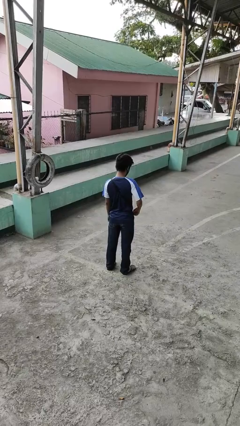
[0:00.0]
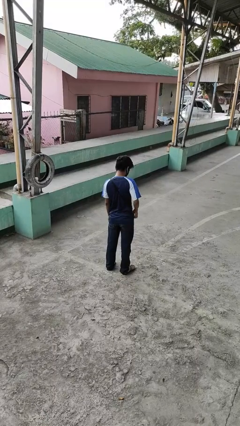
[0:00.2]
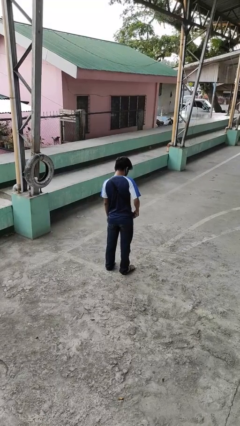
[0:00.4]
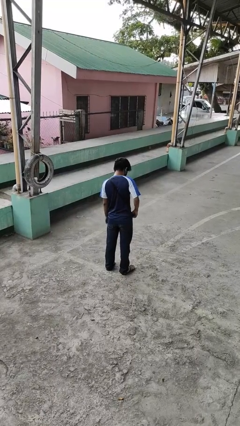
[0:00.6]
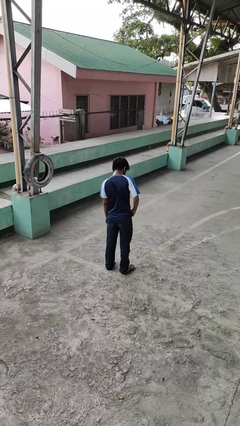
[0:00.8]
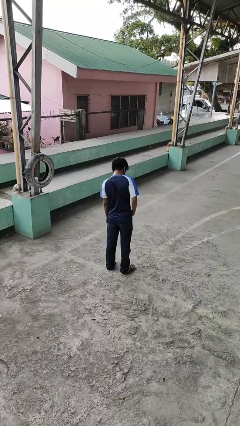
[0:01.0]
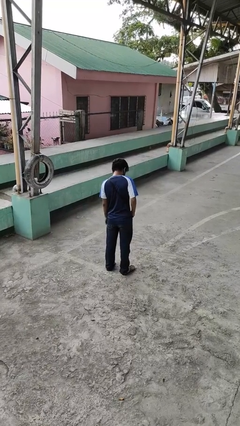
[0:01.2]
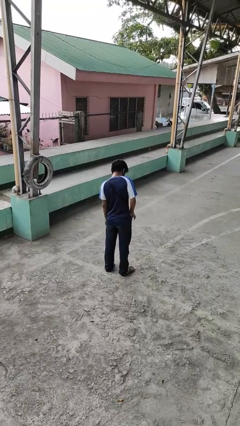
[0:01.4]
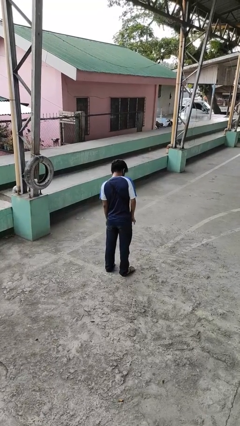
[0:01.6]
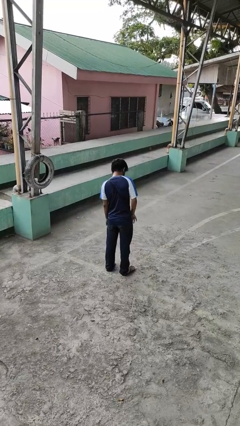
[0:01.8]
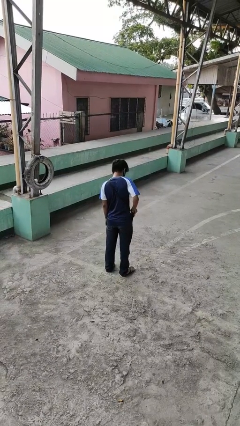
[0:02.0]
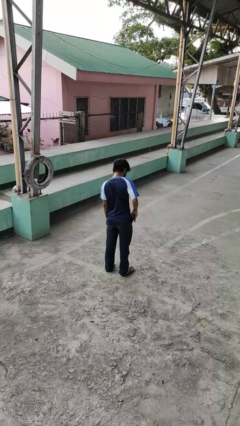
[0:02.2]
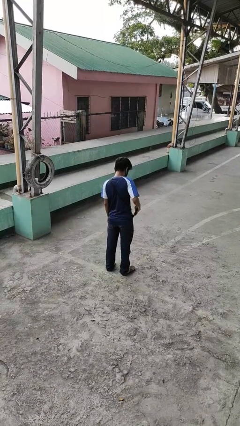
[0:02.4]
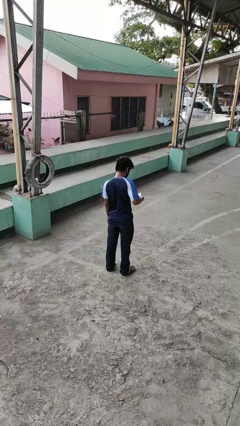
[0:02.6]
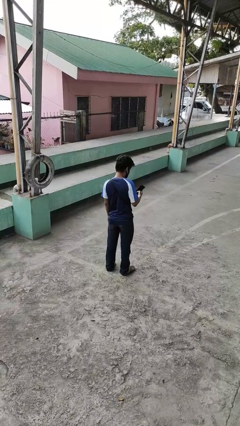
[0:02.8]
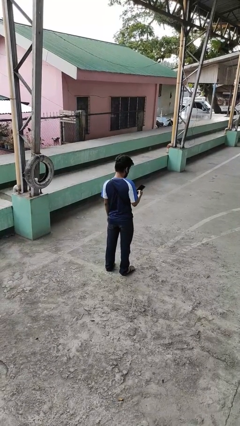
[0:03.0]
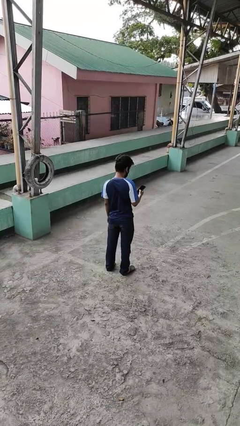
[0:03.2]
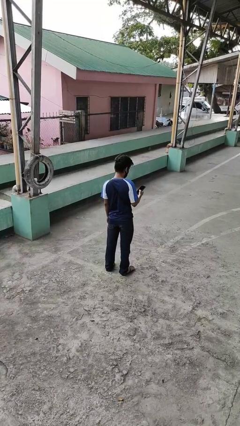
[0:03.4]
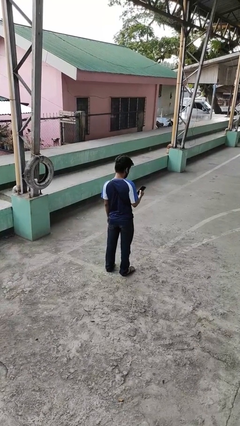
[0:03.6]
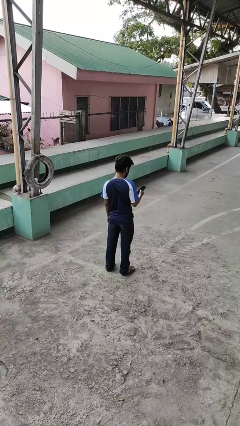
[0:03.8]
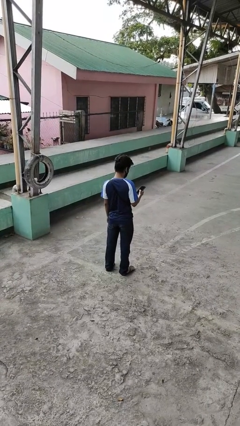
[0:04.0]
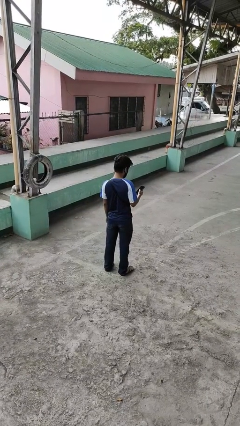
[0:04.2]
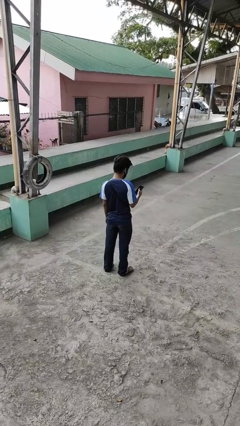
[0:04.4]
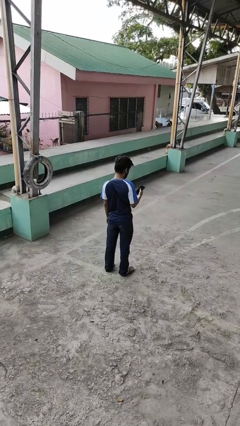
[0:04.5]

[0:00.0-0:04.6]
person takes phone from pocket

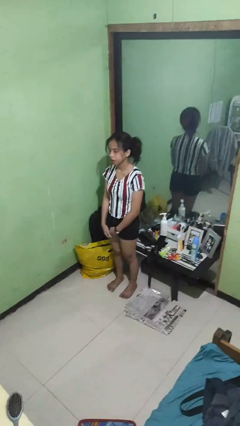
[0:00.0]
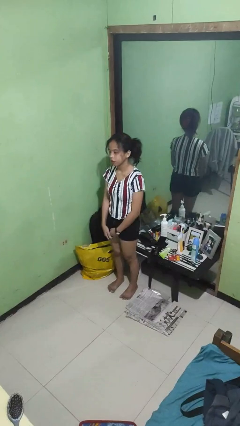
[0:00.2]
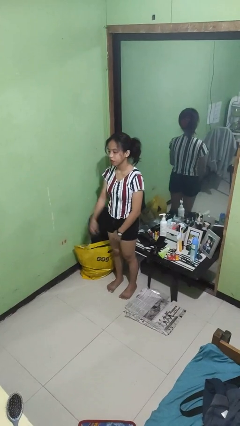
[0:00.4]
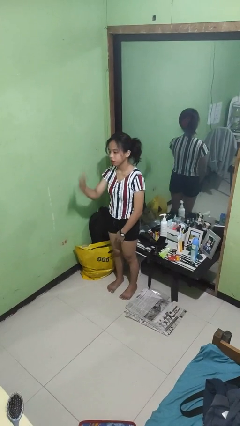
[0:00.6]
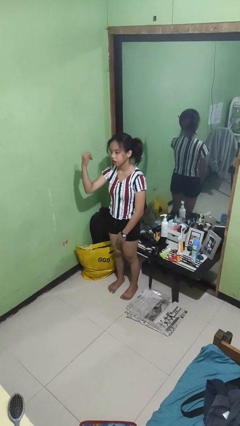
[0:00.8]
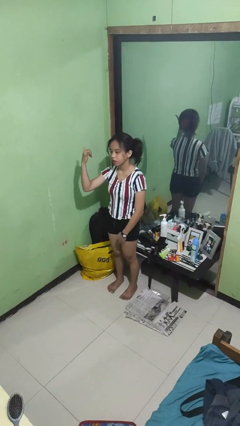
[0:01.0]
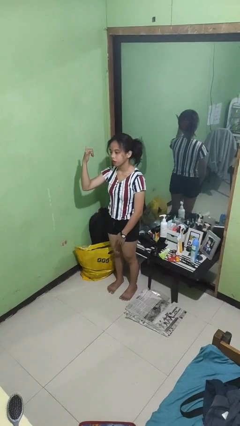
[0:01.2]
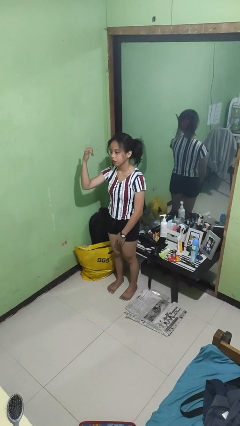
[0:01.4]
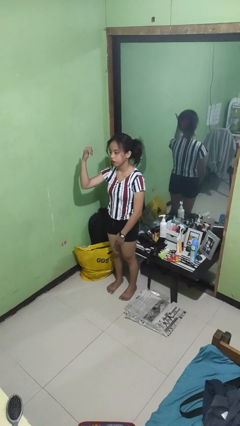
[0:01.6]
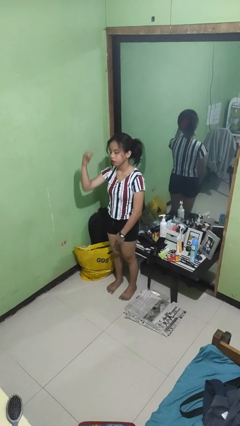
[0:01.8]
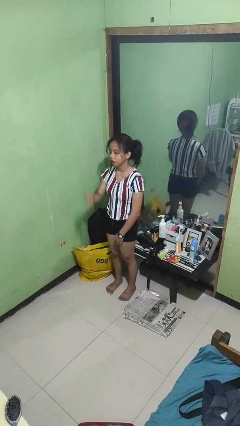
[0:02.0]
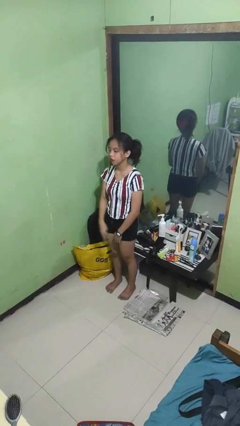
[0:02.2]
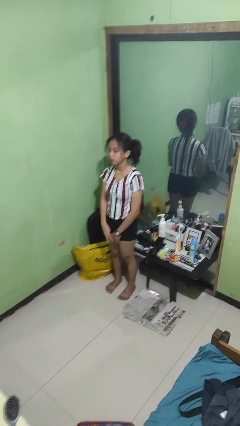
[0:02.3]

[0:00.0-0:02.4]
person gestures hang loose

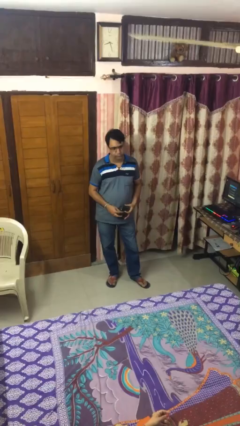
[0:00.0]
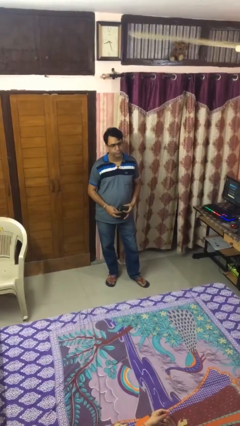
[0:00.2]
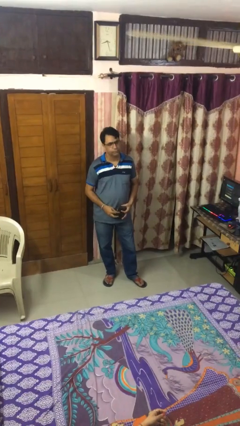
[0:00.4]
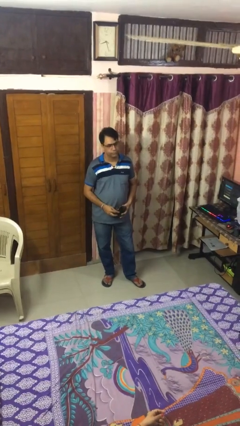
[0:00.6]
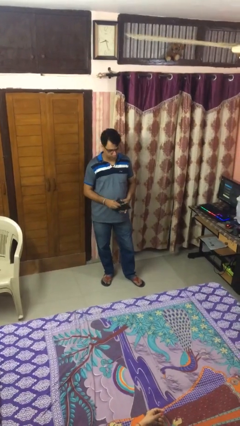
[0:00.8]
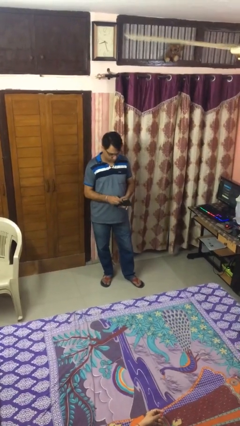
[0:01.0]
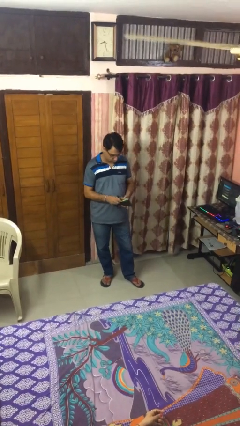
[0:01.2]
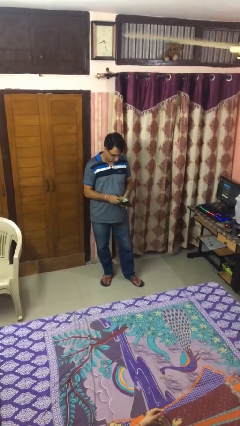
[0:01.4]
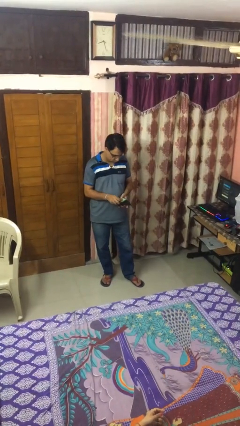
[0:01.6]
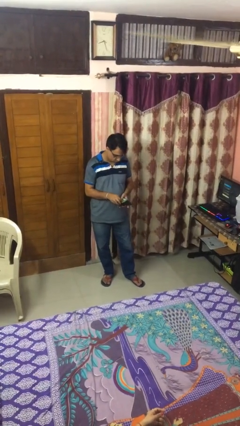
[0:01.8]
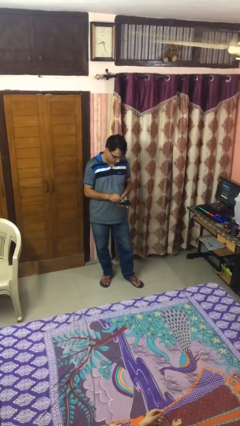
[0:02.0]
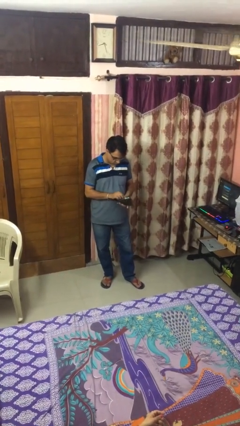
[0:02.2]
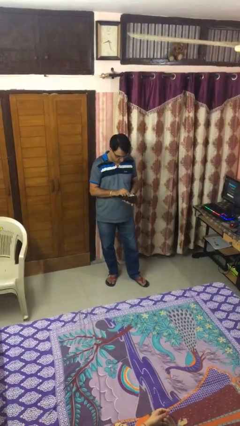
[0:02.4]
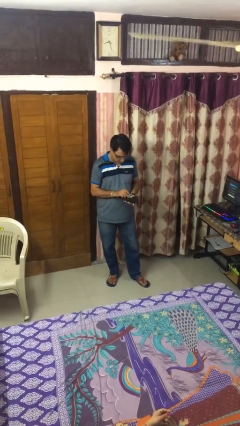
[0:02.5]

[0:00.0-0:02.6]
person searches in purse

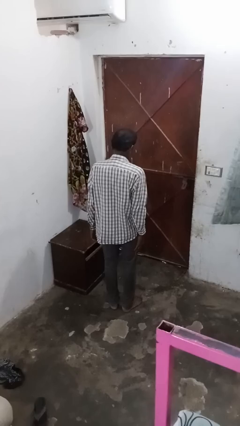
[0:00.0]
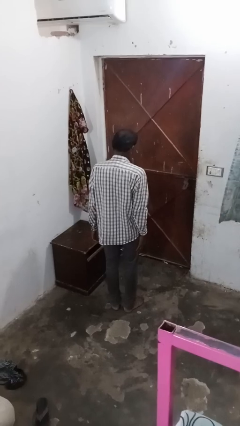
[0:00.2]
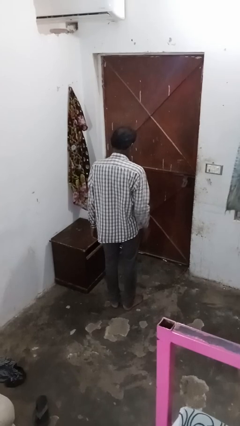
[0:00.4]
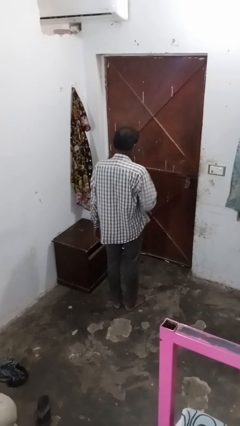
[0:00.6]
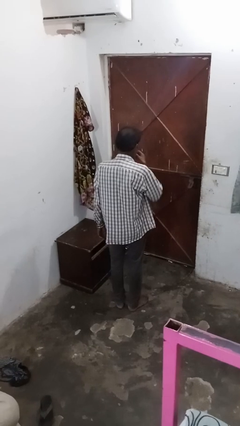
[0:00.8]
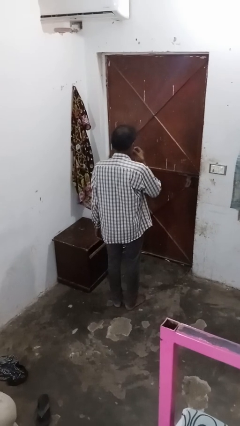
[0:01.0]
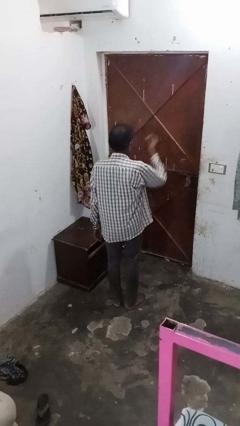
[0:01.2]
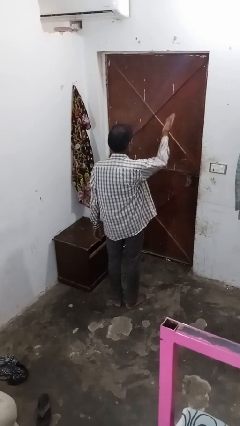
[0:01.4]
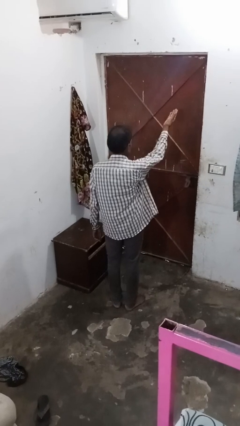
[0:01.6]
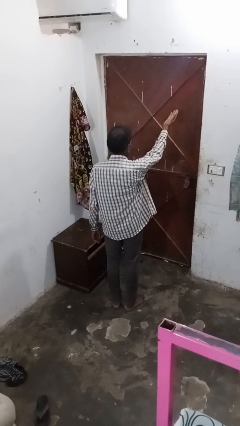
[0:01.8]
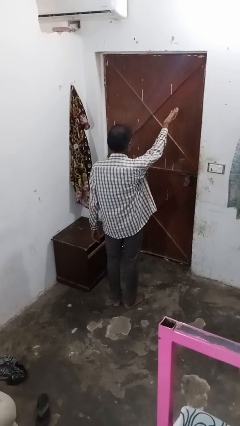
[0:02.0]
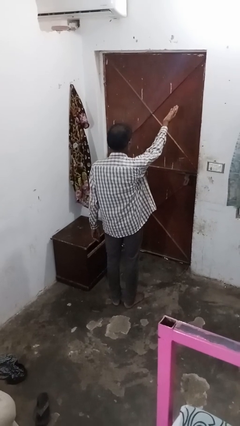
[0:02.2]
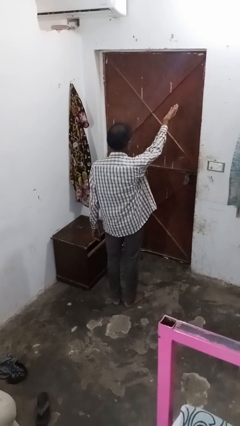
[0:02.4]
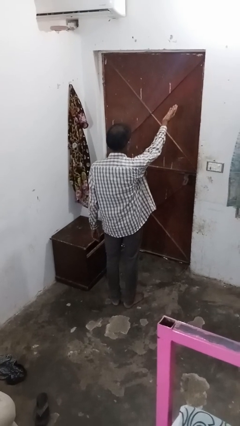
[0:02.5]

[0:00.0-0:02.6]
person gestures blow kiss

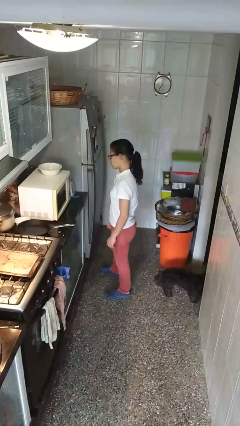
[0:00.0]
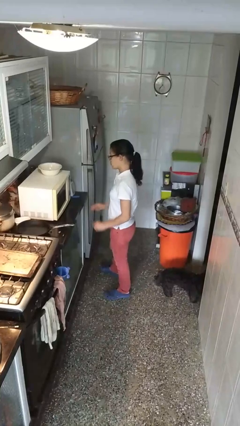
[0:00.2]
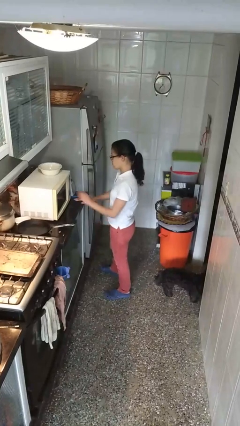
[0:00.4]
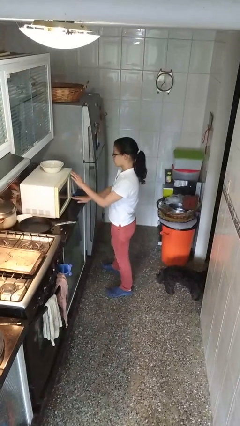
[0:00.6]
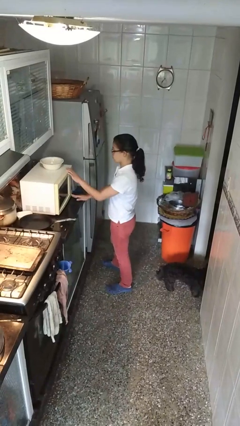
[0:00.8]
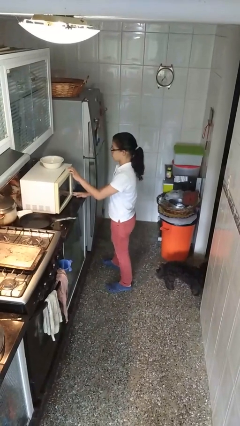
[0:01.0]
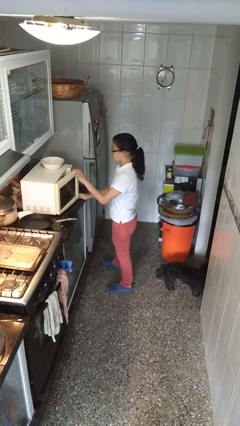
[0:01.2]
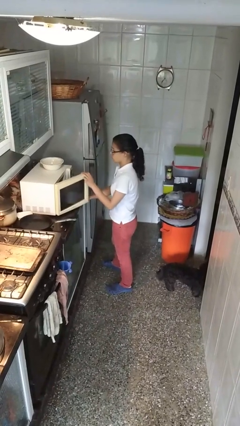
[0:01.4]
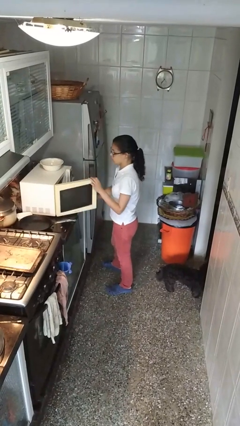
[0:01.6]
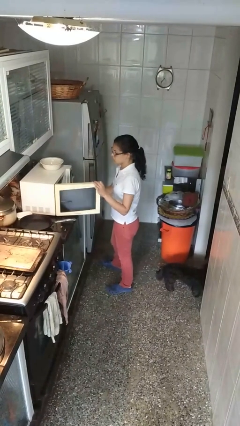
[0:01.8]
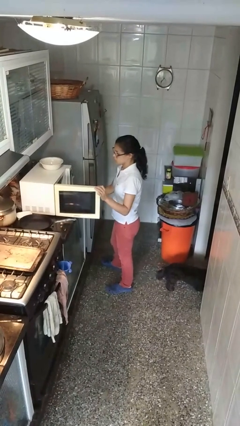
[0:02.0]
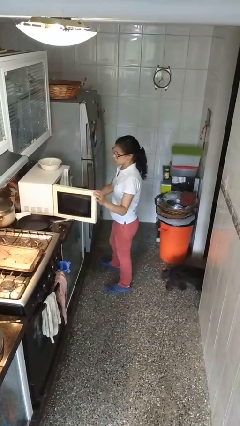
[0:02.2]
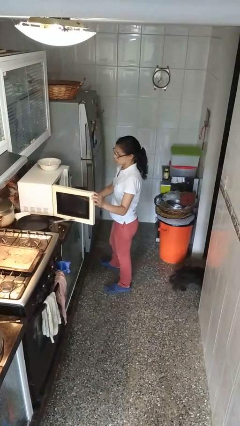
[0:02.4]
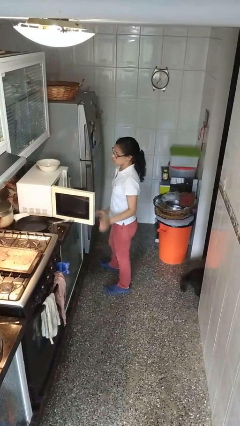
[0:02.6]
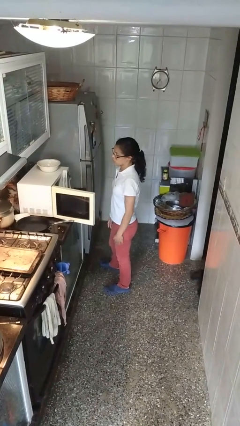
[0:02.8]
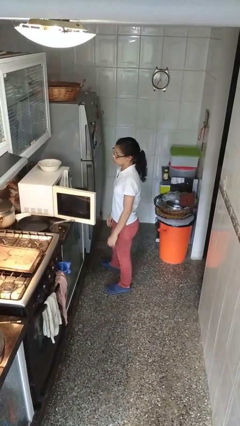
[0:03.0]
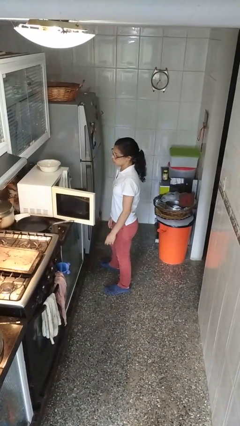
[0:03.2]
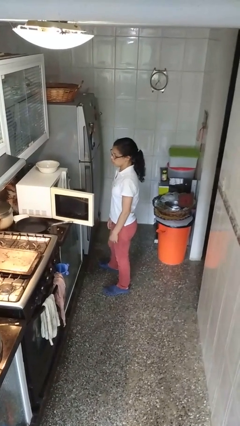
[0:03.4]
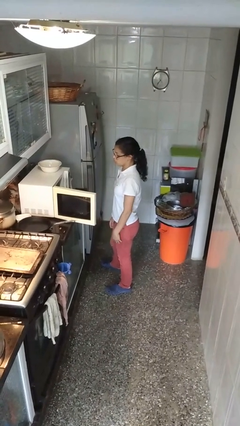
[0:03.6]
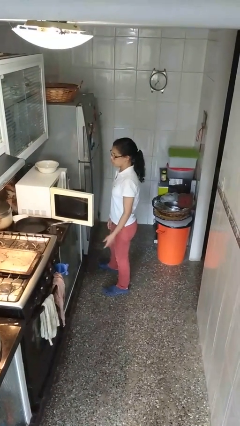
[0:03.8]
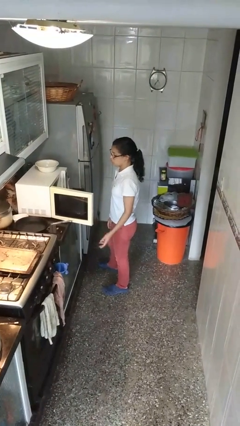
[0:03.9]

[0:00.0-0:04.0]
person opens microwave

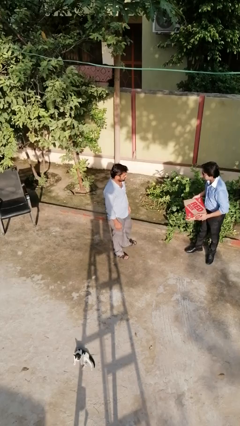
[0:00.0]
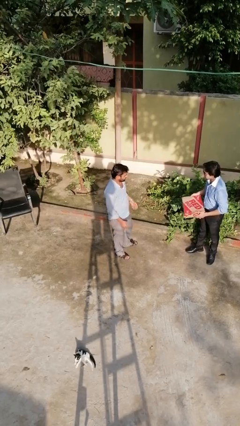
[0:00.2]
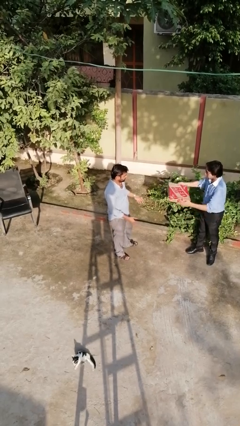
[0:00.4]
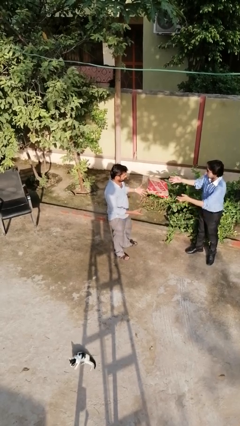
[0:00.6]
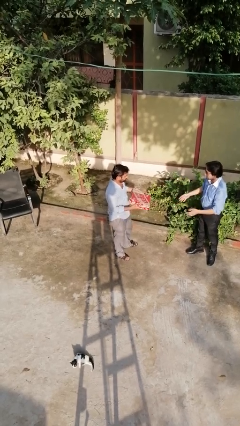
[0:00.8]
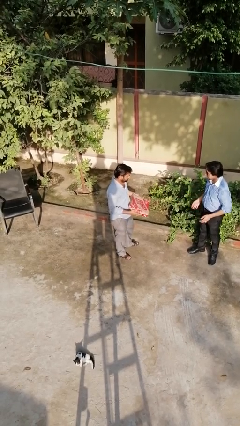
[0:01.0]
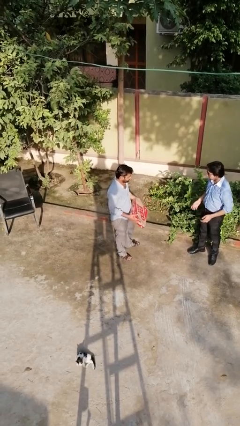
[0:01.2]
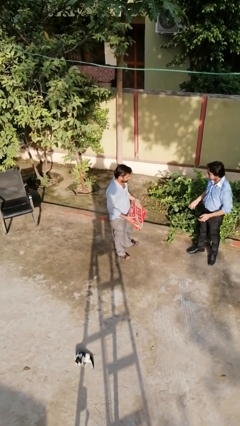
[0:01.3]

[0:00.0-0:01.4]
person catches object from person
